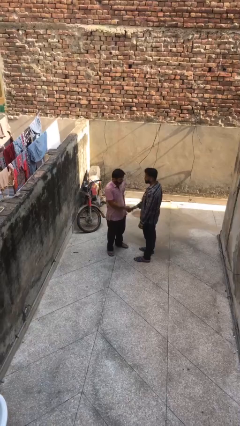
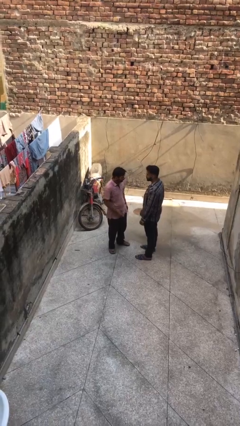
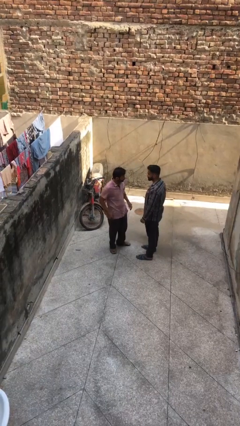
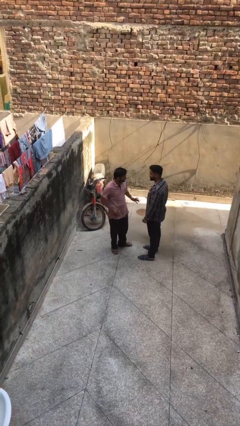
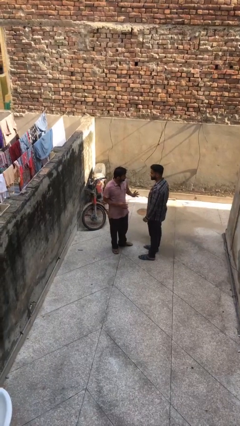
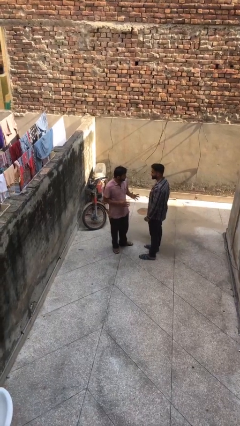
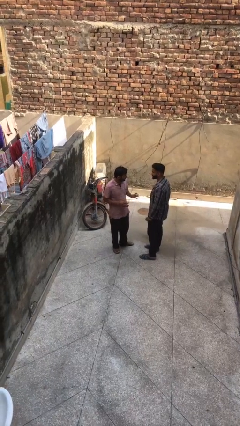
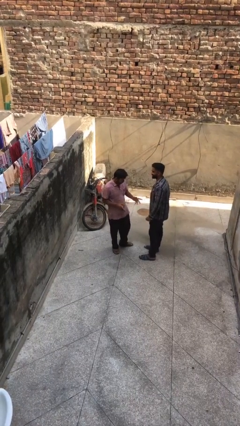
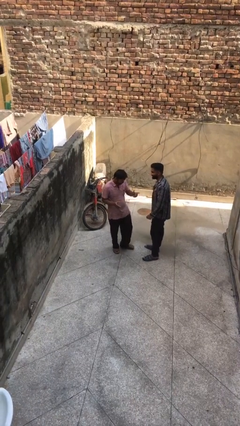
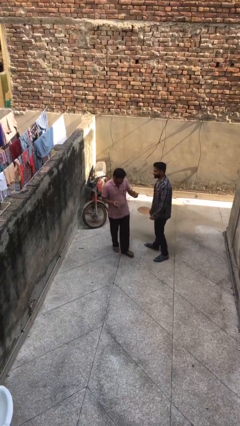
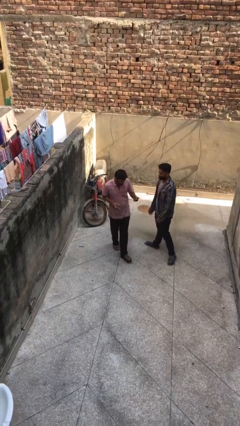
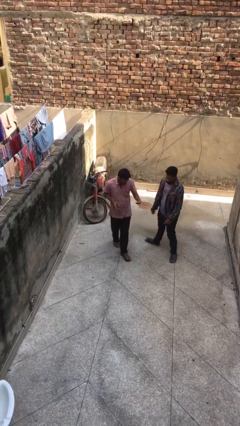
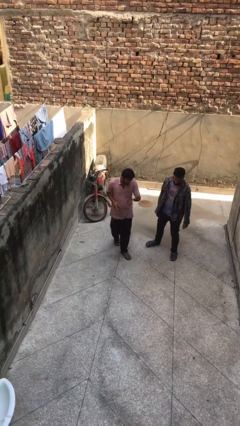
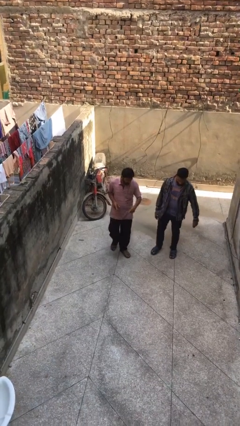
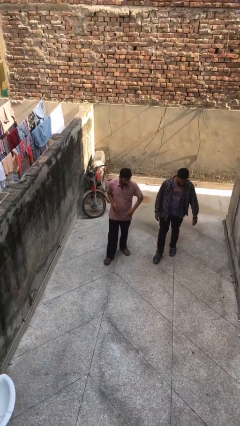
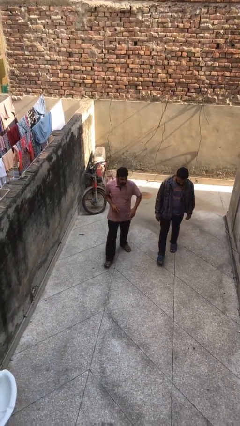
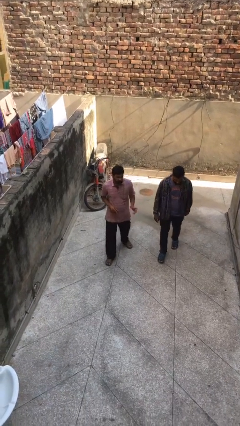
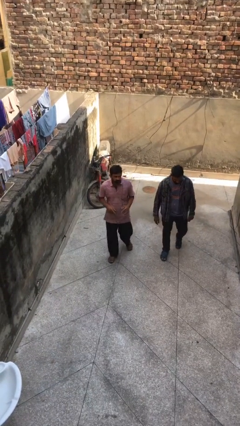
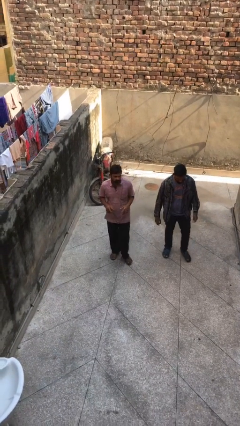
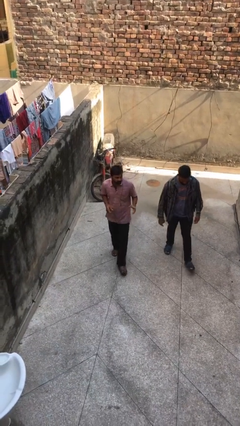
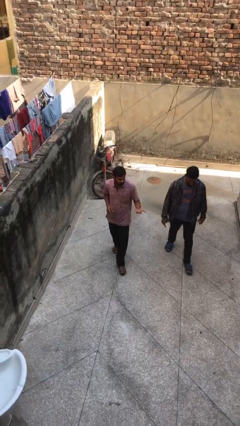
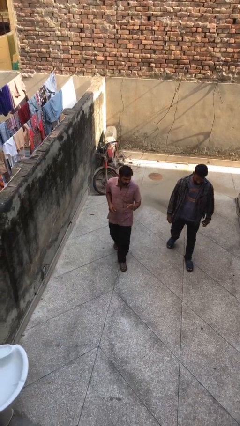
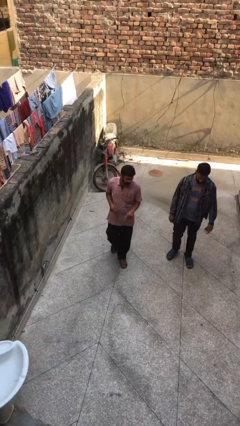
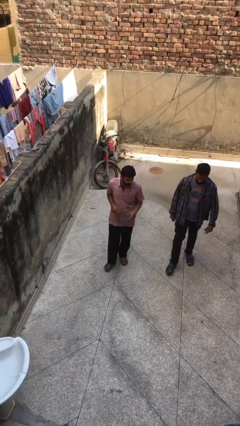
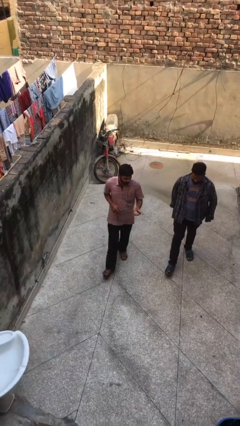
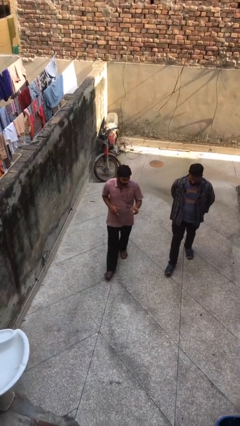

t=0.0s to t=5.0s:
person talks to person

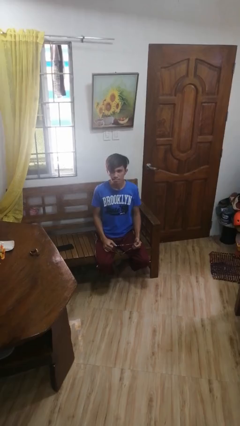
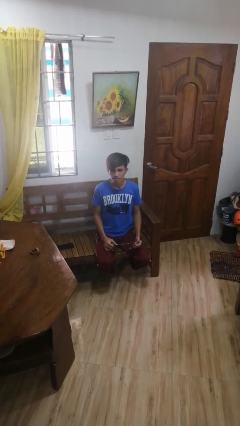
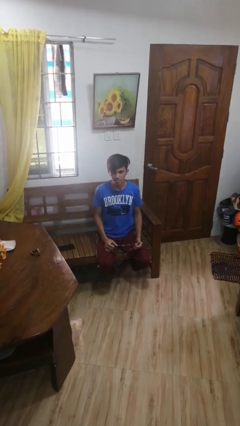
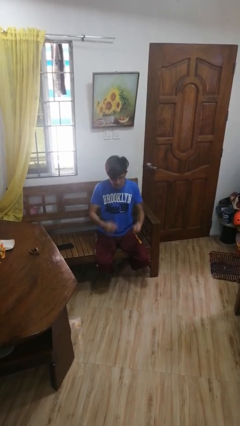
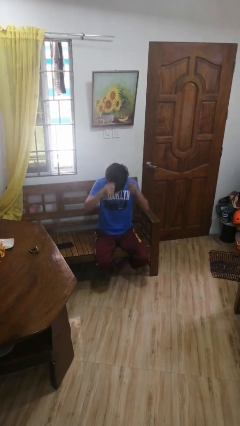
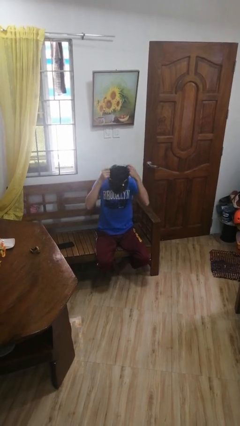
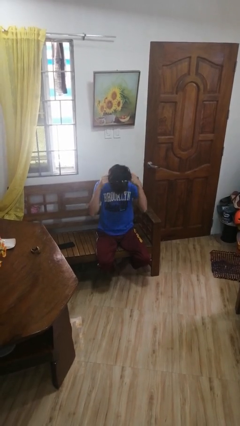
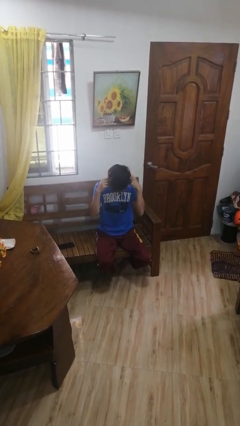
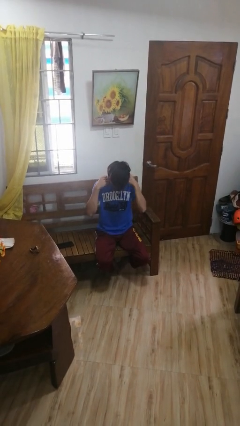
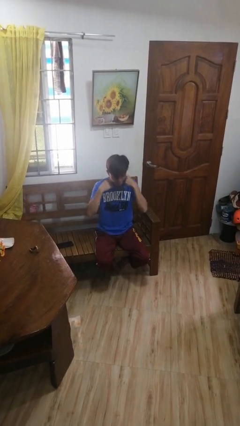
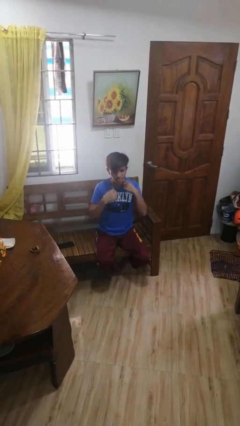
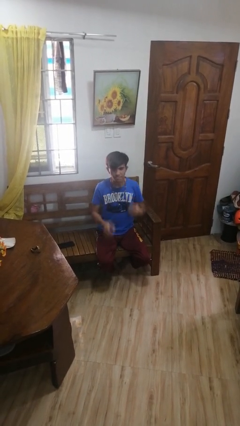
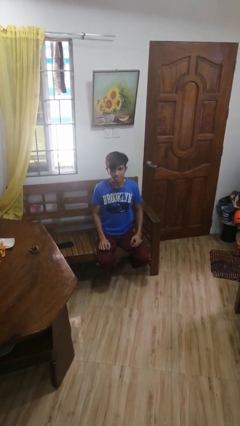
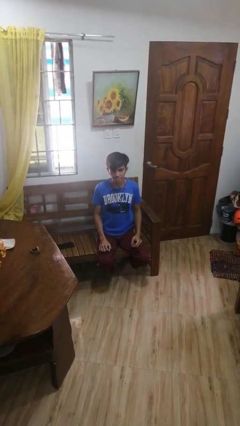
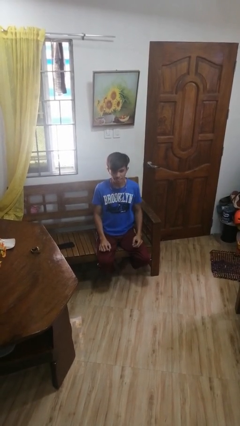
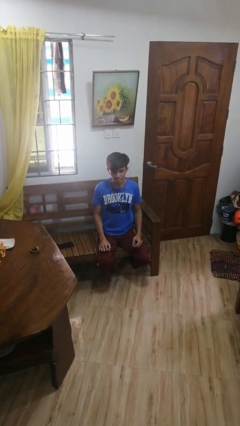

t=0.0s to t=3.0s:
person puts on necklace

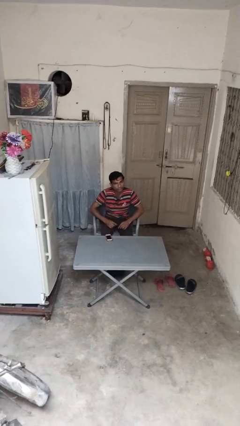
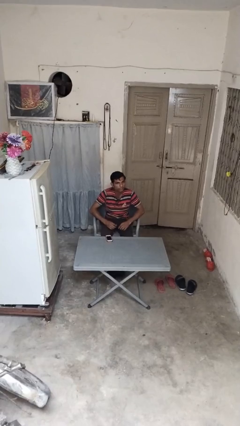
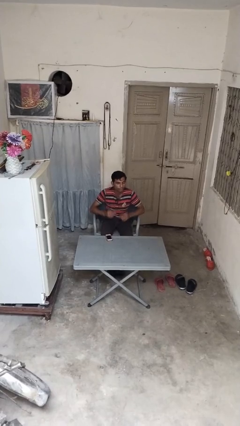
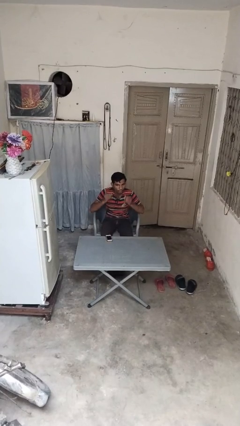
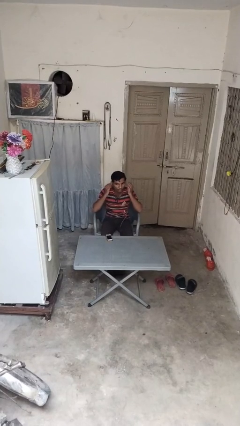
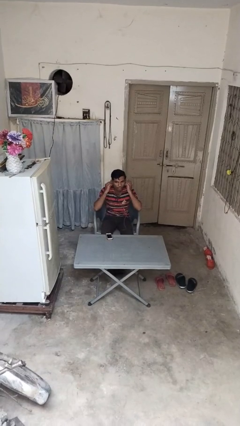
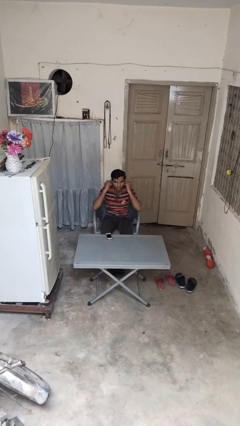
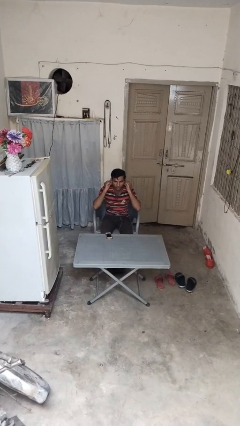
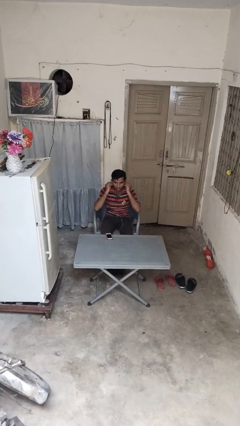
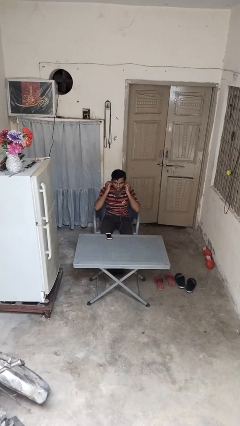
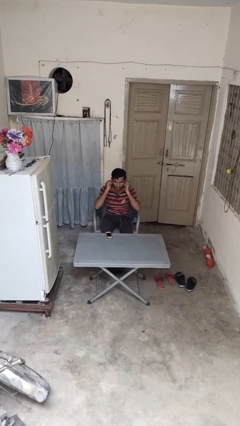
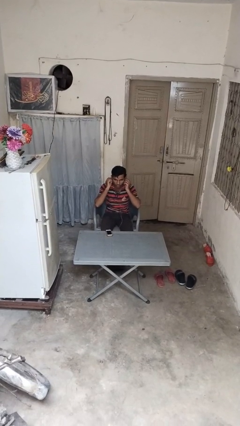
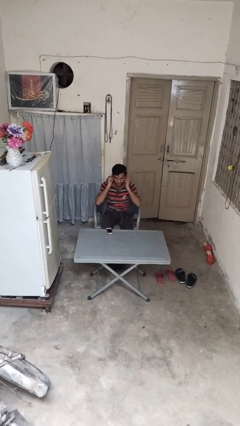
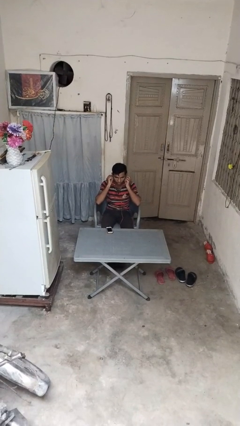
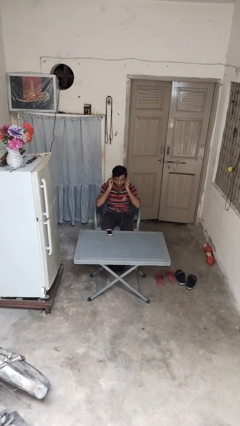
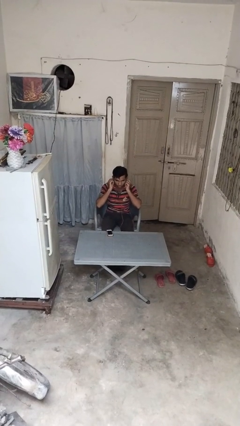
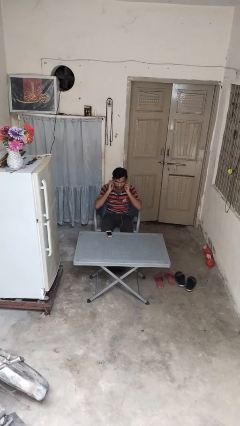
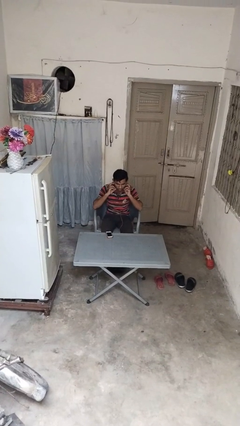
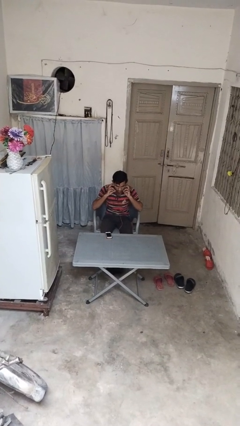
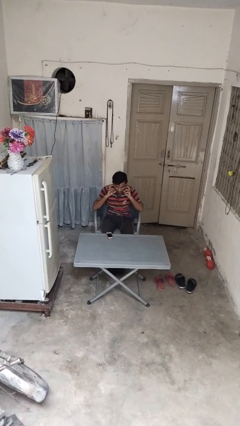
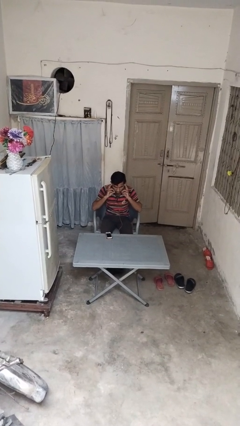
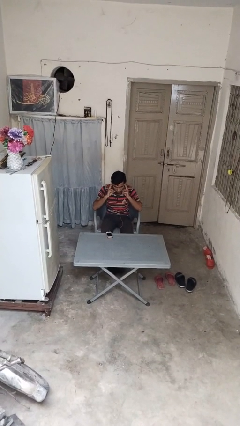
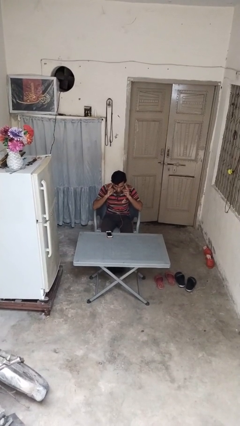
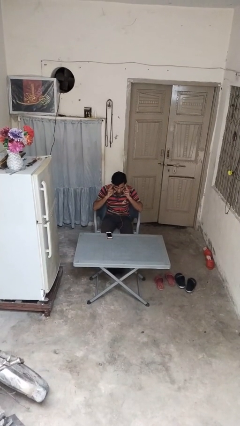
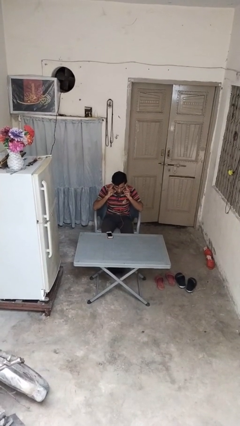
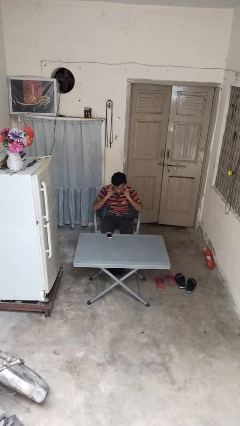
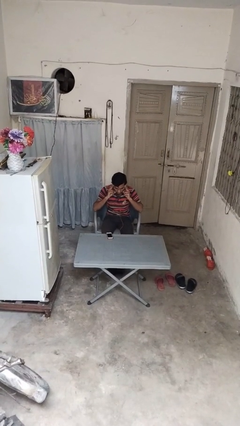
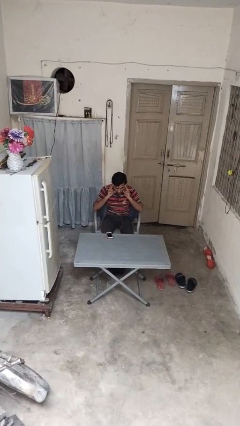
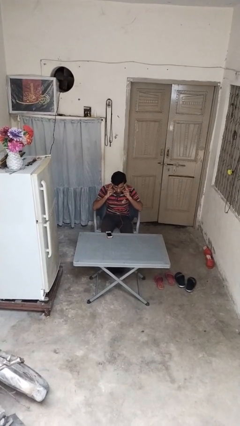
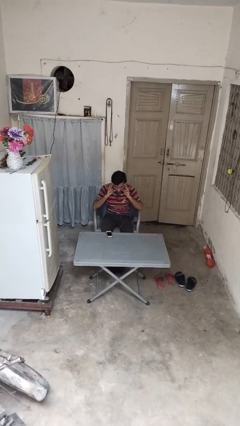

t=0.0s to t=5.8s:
person puts on headphones

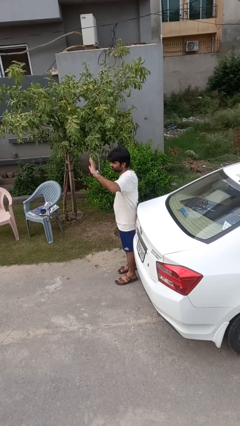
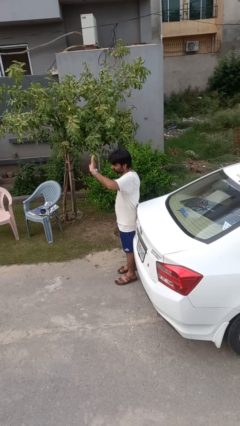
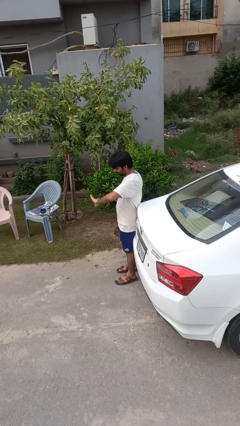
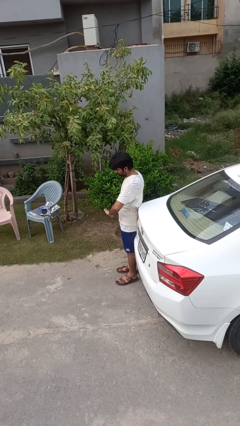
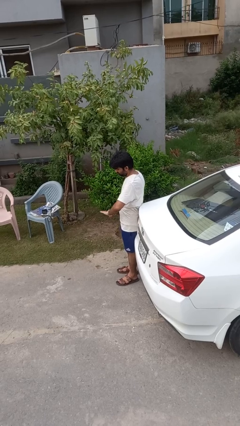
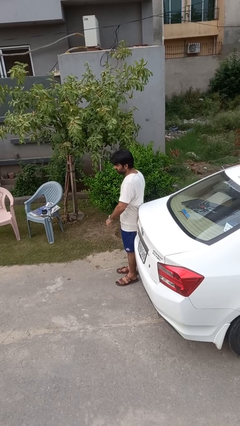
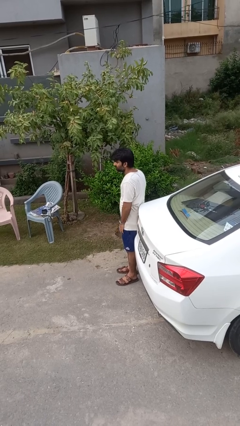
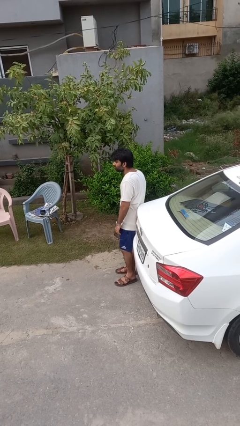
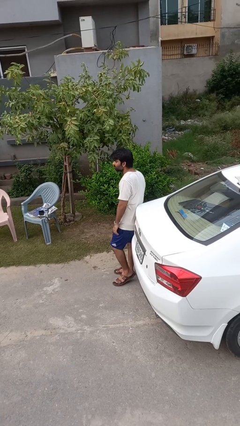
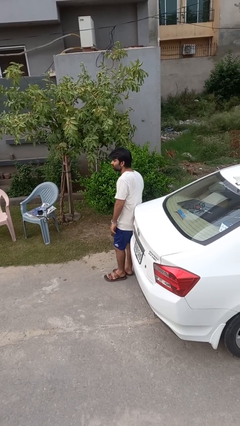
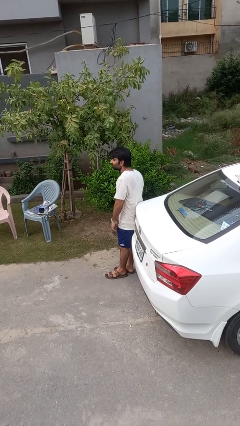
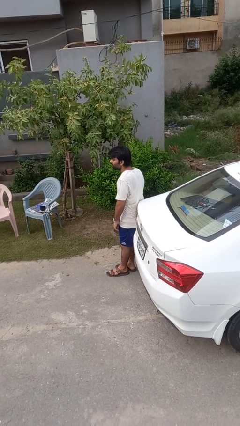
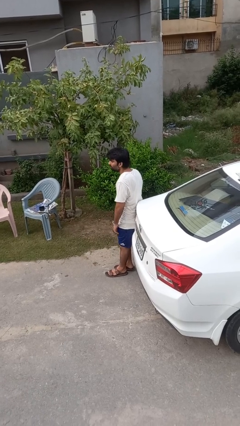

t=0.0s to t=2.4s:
person gestures swipe down

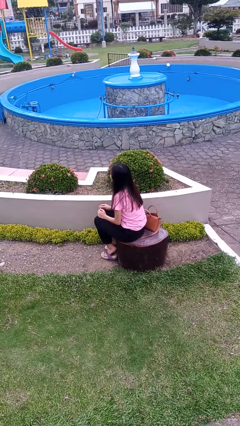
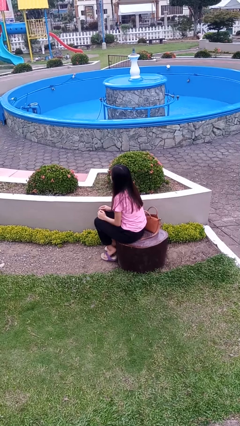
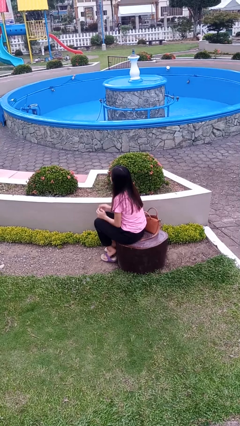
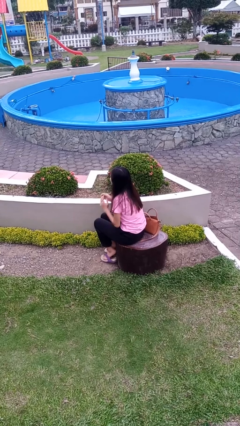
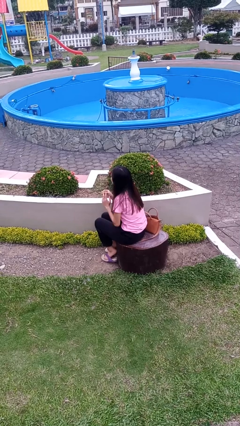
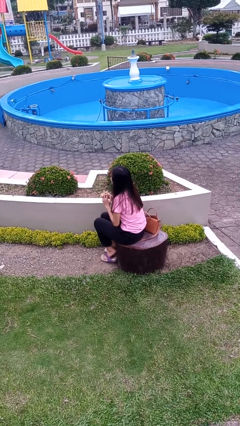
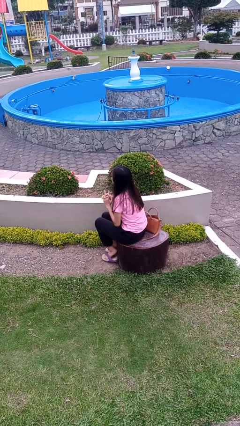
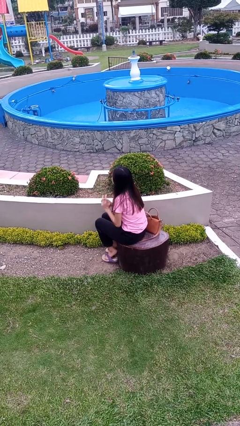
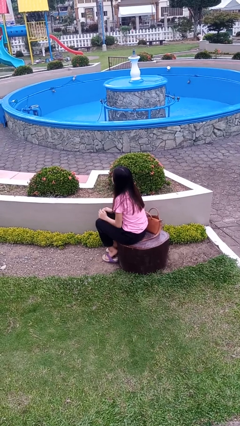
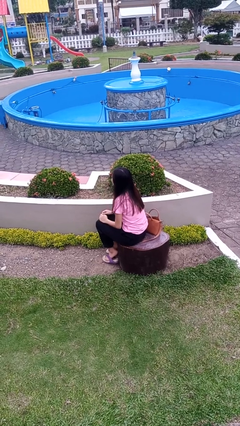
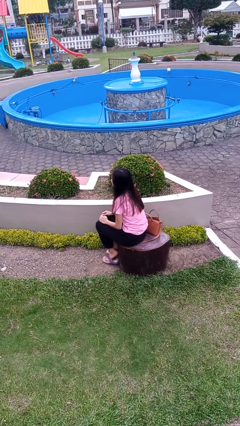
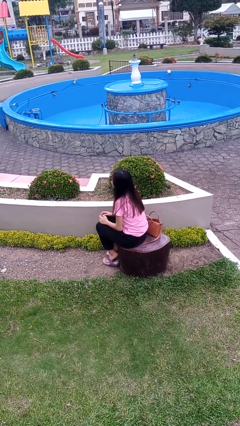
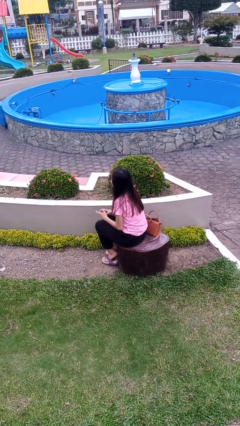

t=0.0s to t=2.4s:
person puts on ring
